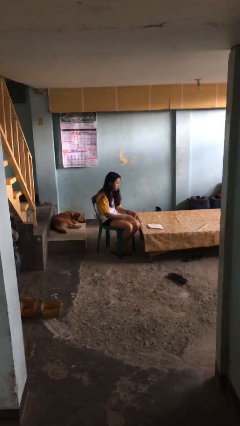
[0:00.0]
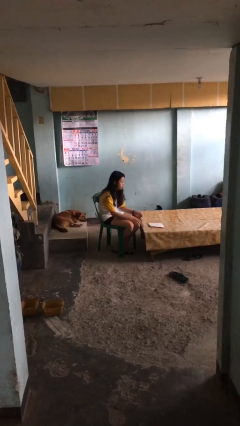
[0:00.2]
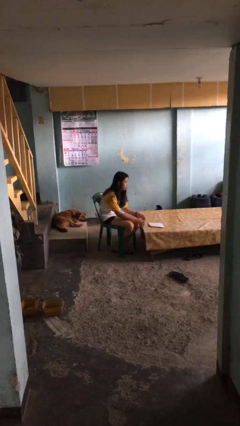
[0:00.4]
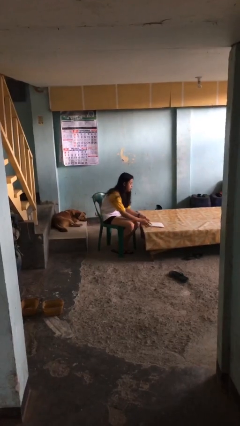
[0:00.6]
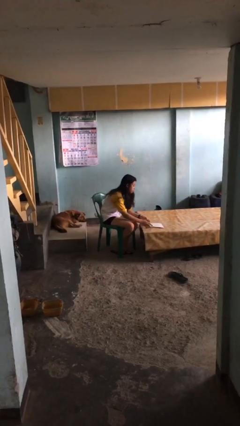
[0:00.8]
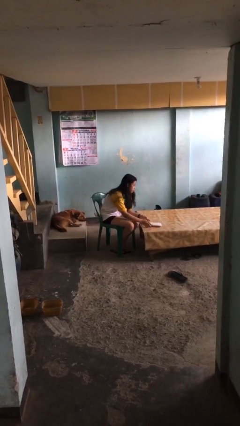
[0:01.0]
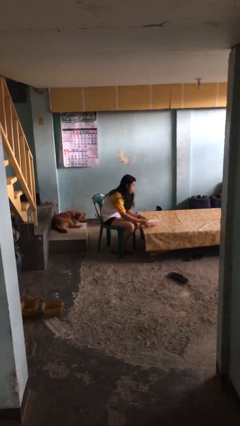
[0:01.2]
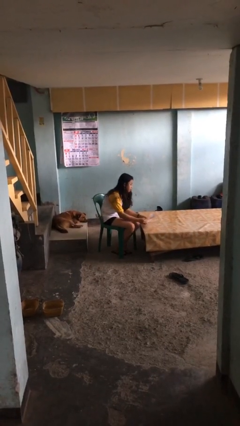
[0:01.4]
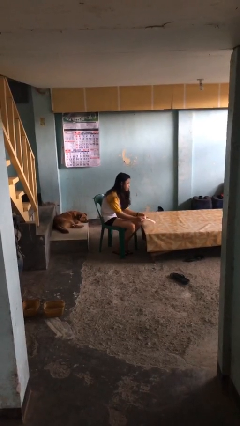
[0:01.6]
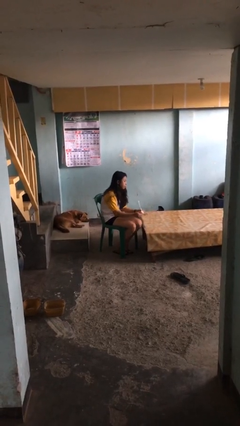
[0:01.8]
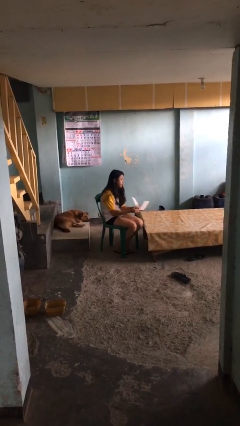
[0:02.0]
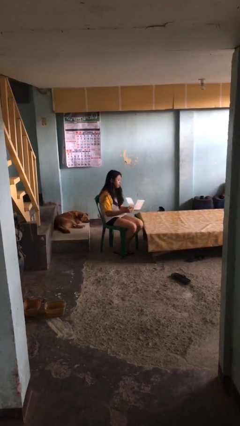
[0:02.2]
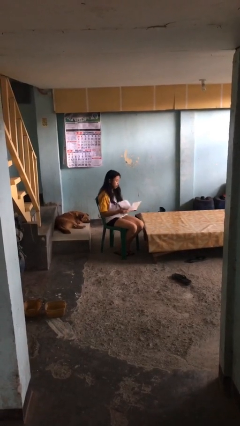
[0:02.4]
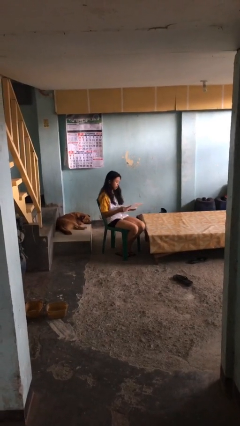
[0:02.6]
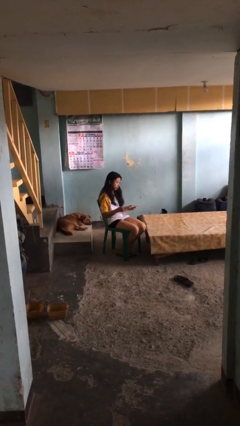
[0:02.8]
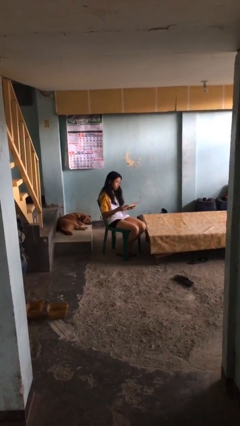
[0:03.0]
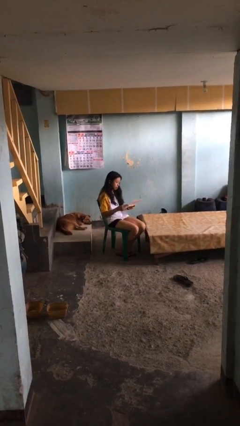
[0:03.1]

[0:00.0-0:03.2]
person picks up object from table

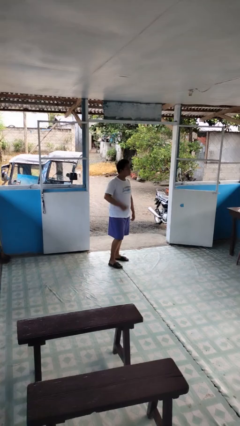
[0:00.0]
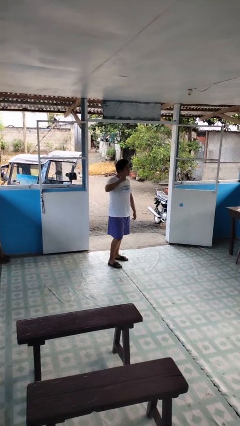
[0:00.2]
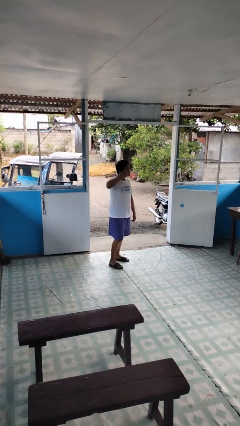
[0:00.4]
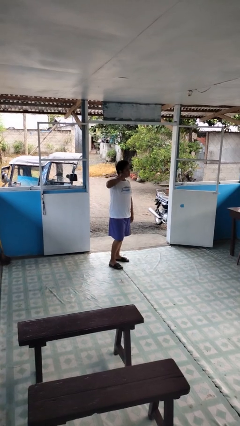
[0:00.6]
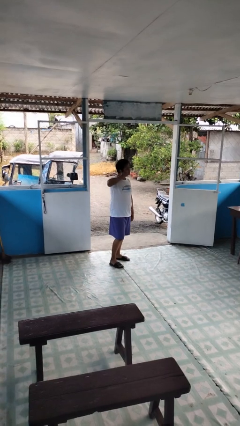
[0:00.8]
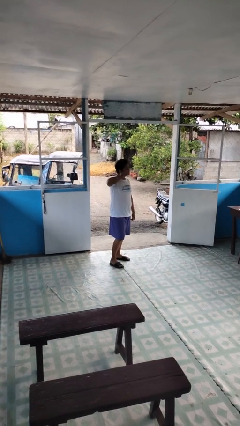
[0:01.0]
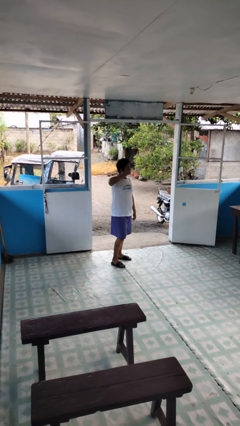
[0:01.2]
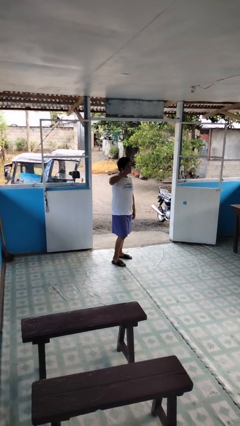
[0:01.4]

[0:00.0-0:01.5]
person gestures call me

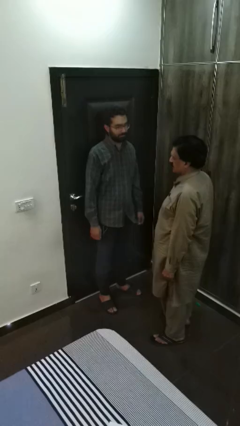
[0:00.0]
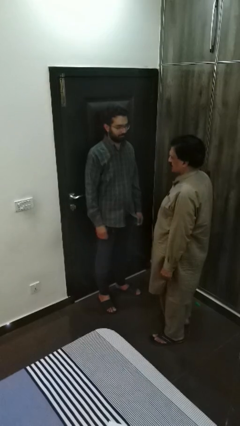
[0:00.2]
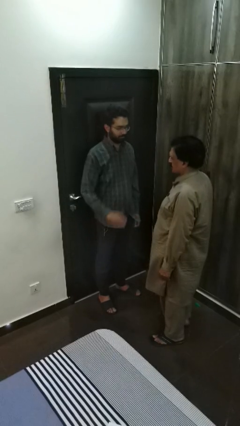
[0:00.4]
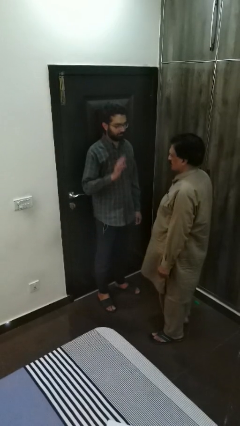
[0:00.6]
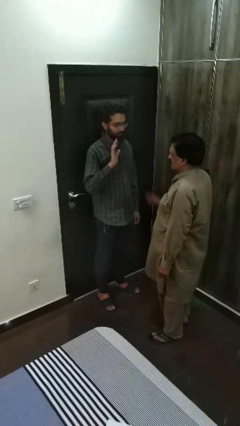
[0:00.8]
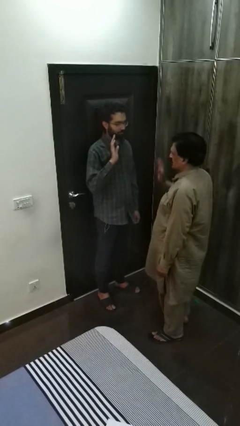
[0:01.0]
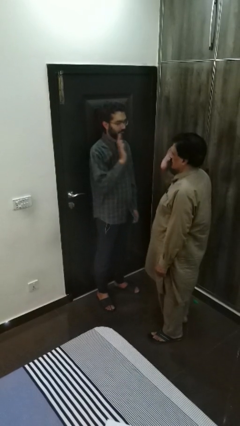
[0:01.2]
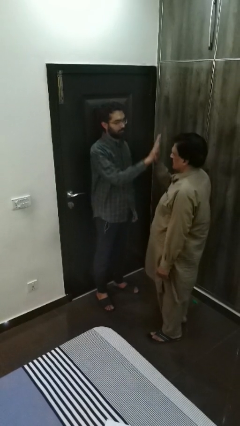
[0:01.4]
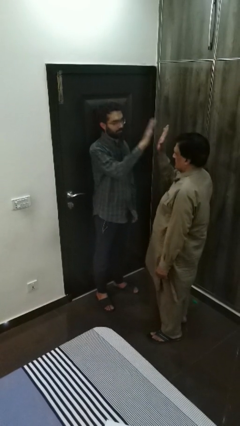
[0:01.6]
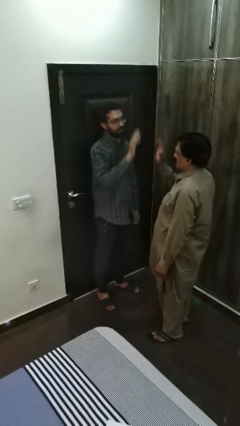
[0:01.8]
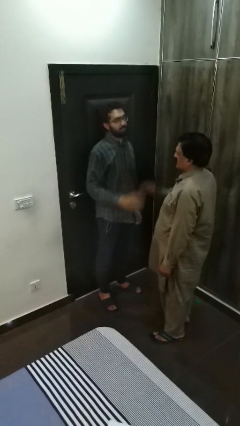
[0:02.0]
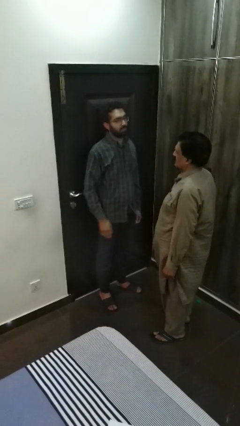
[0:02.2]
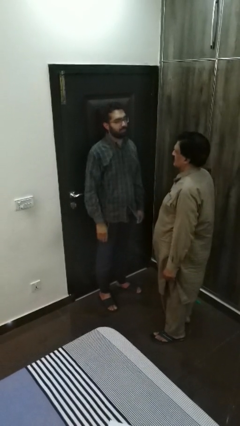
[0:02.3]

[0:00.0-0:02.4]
person highfives hand

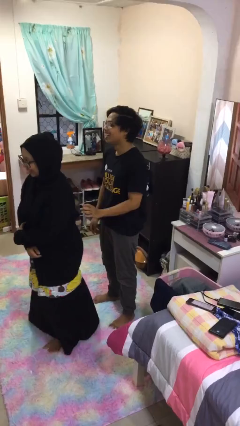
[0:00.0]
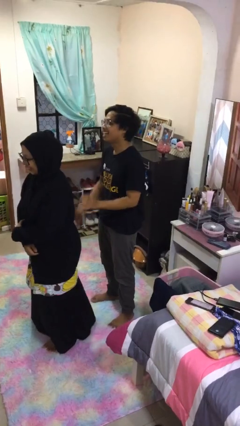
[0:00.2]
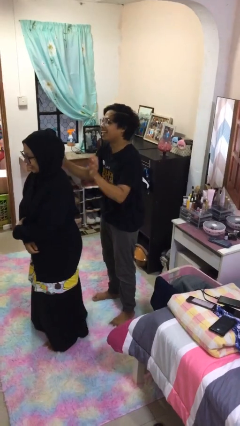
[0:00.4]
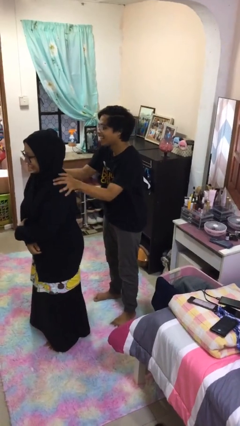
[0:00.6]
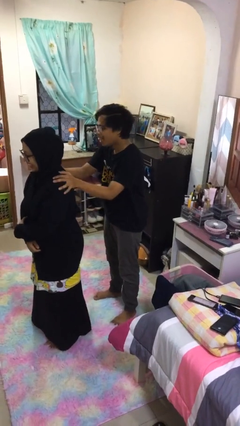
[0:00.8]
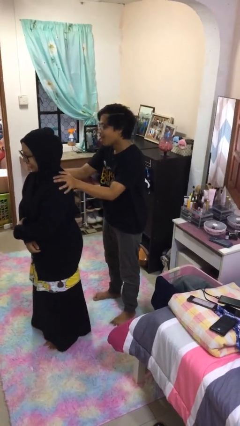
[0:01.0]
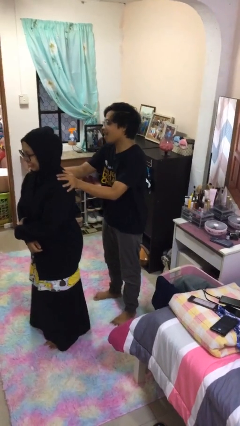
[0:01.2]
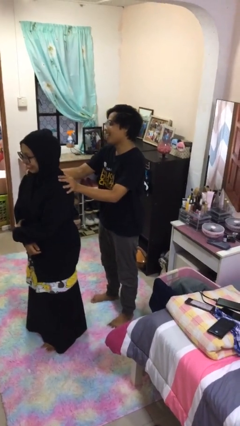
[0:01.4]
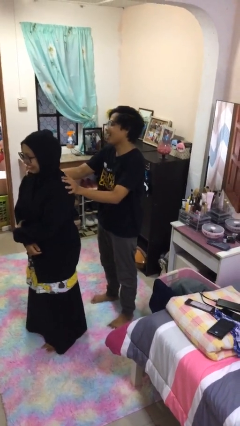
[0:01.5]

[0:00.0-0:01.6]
person grabs person by shoulder

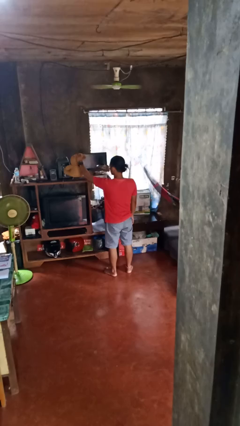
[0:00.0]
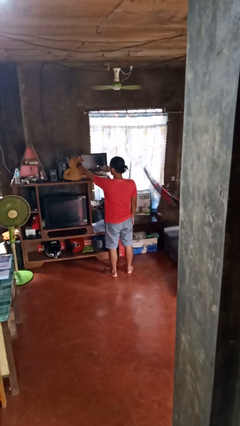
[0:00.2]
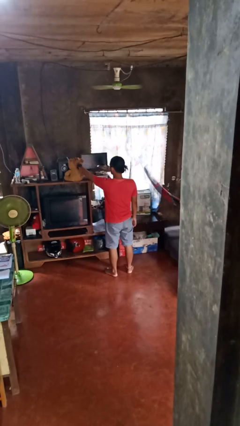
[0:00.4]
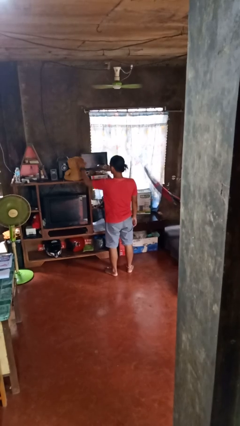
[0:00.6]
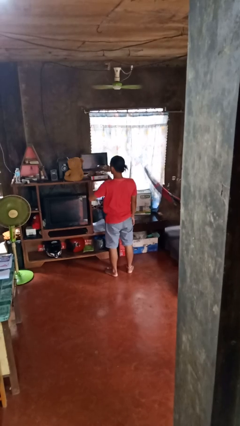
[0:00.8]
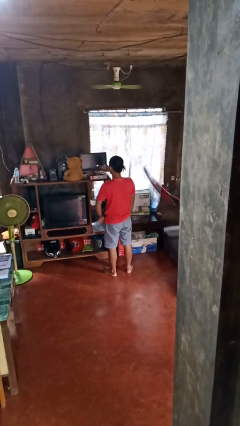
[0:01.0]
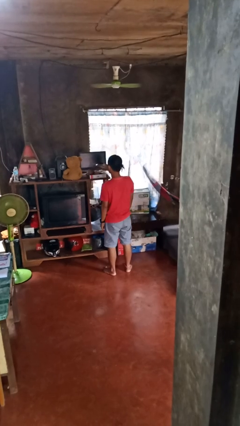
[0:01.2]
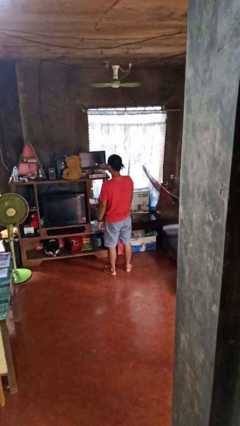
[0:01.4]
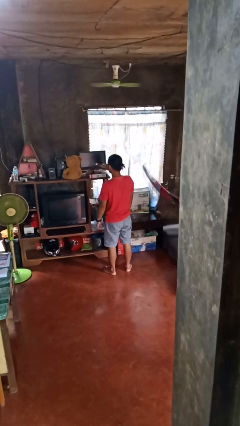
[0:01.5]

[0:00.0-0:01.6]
person puts down object on shelf

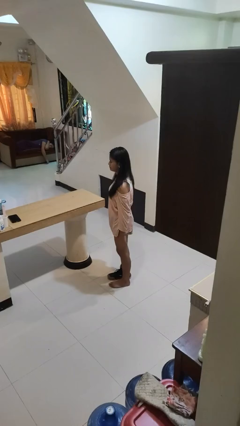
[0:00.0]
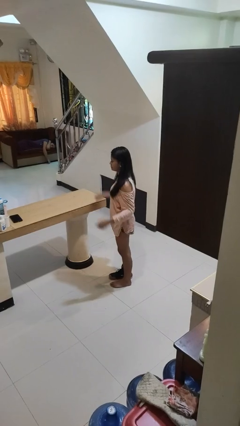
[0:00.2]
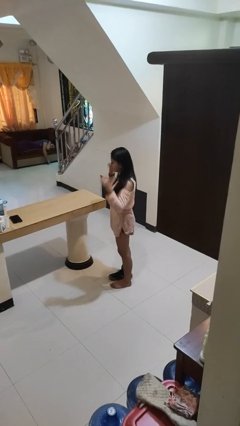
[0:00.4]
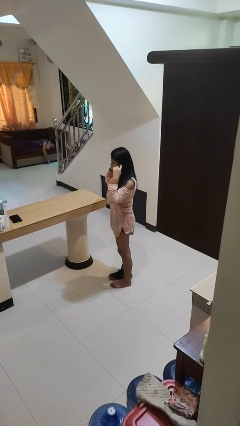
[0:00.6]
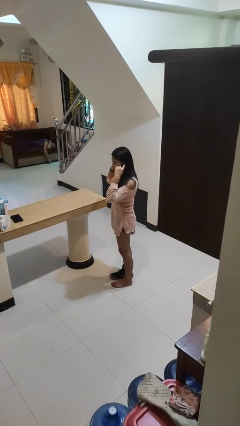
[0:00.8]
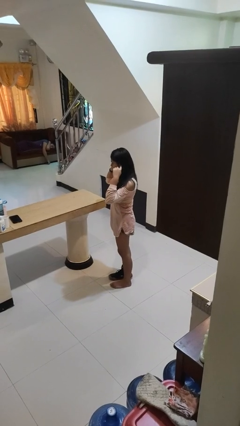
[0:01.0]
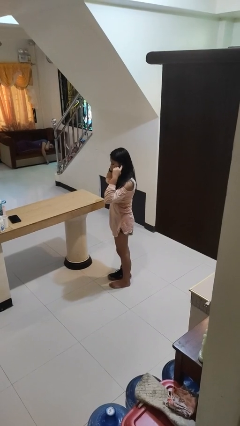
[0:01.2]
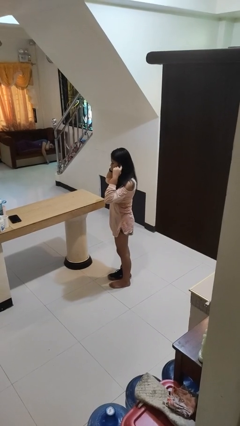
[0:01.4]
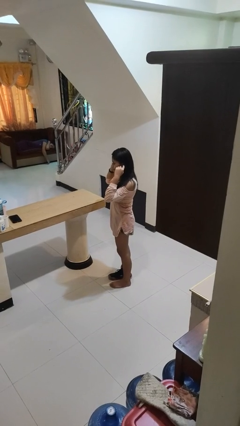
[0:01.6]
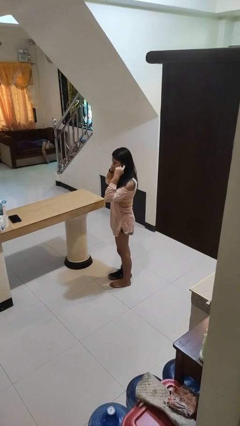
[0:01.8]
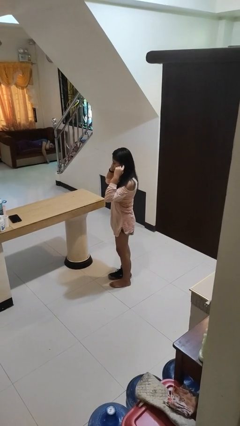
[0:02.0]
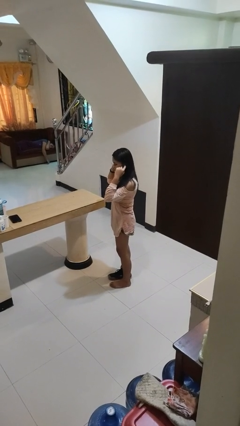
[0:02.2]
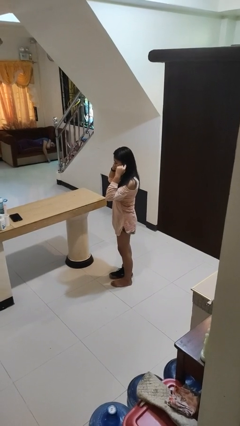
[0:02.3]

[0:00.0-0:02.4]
person puts fingers in ear

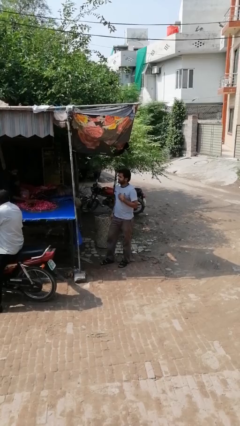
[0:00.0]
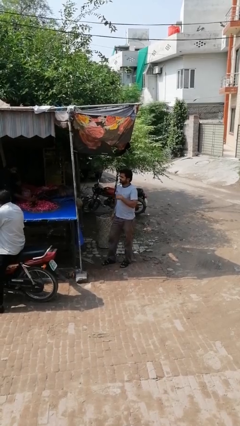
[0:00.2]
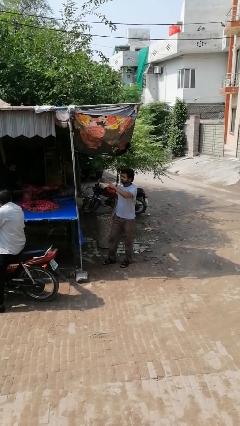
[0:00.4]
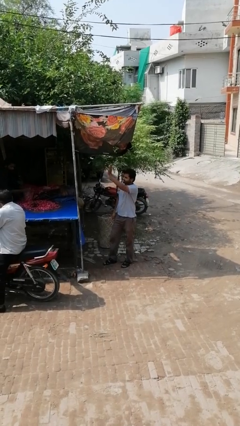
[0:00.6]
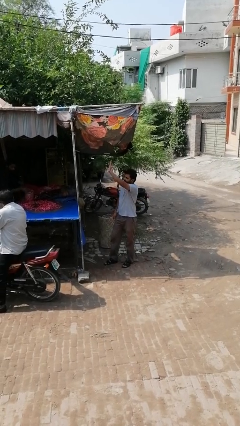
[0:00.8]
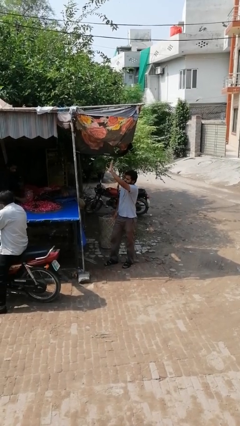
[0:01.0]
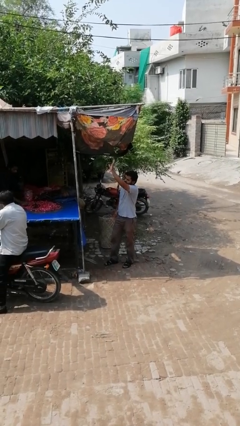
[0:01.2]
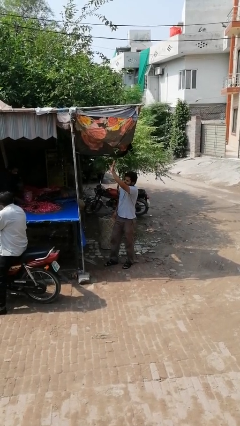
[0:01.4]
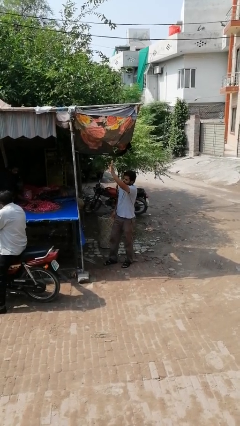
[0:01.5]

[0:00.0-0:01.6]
person waves at person

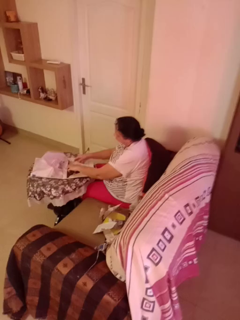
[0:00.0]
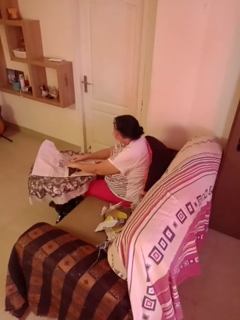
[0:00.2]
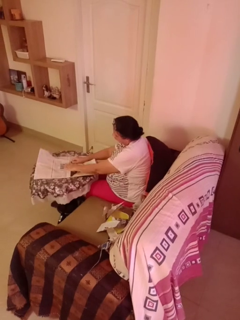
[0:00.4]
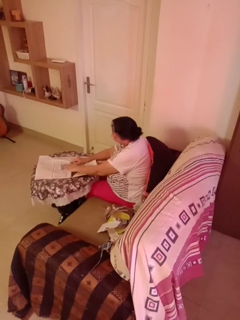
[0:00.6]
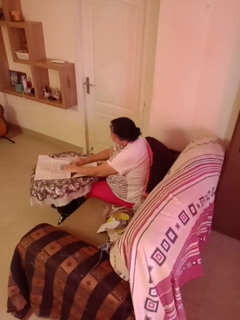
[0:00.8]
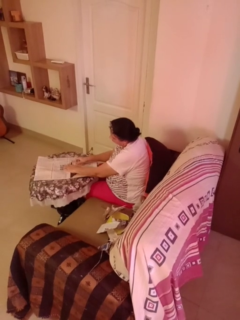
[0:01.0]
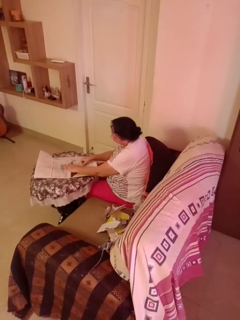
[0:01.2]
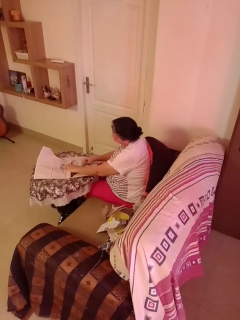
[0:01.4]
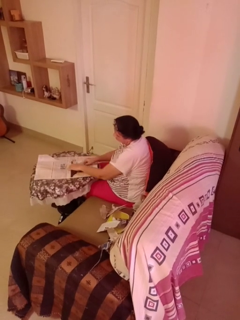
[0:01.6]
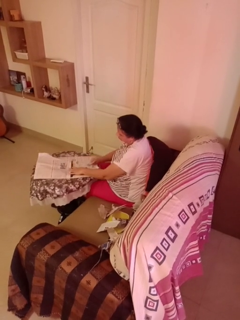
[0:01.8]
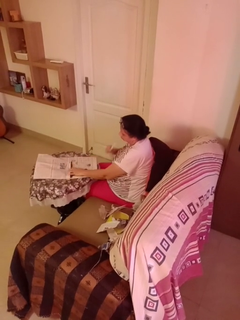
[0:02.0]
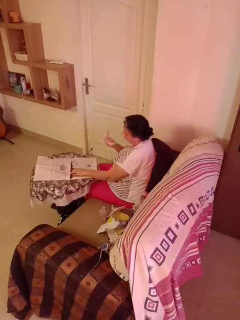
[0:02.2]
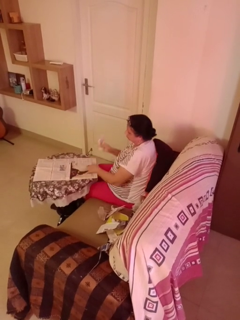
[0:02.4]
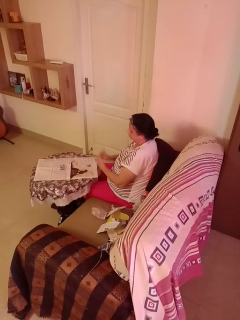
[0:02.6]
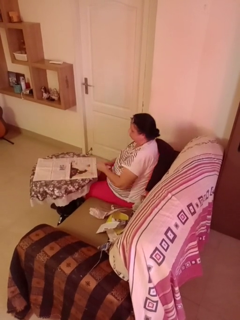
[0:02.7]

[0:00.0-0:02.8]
person tears paper

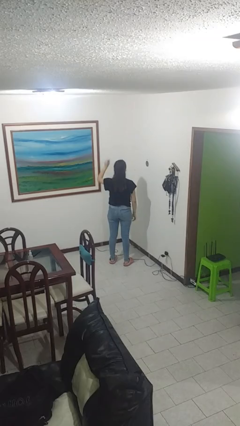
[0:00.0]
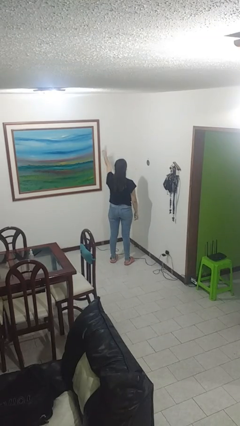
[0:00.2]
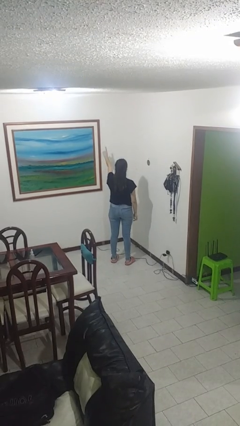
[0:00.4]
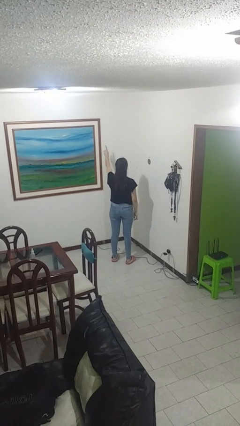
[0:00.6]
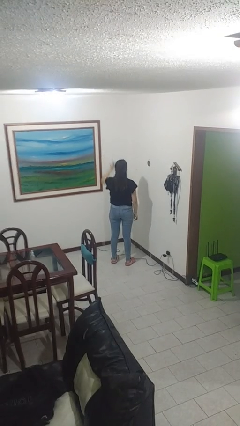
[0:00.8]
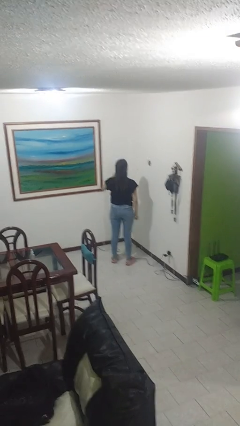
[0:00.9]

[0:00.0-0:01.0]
person gestures number one
